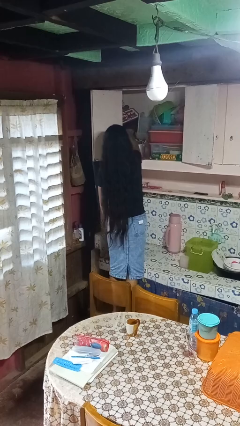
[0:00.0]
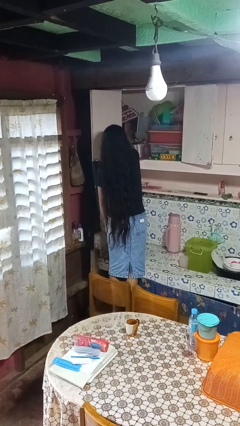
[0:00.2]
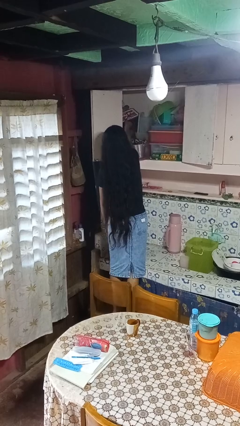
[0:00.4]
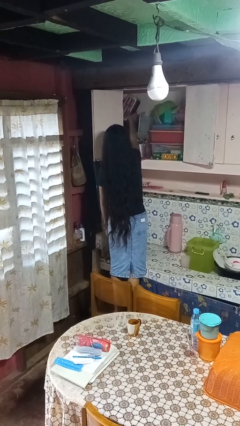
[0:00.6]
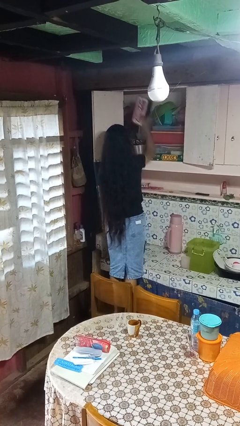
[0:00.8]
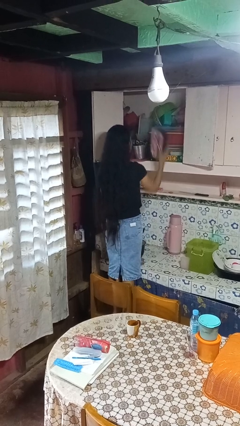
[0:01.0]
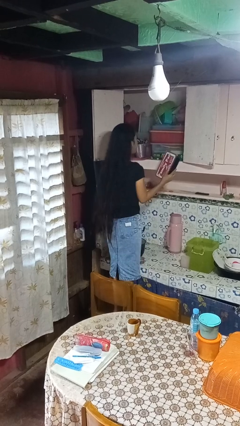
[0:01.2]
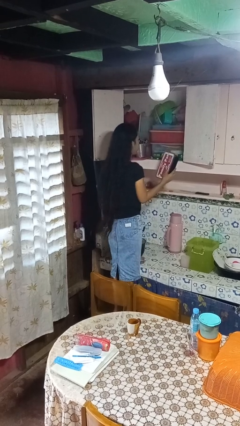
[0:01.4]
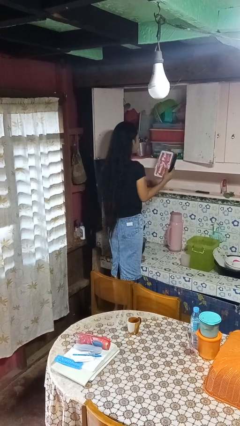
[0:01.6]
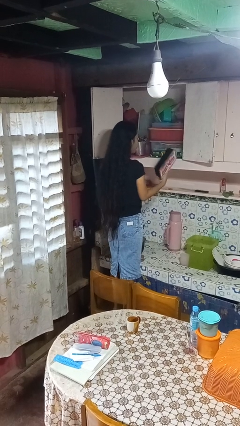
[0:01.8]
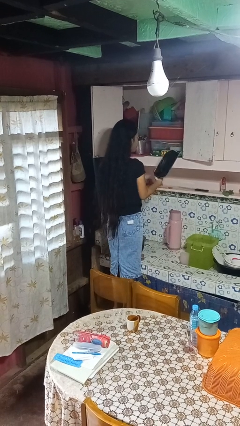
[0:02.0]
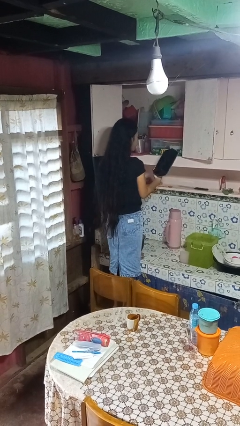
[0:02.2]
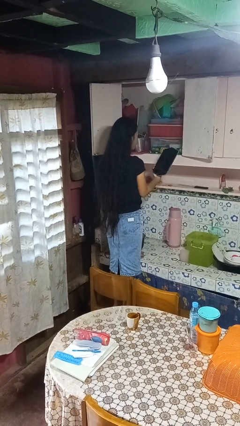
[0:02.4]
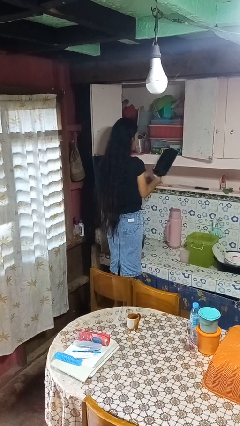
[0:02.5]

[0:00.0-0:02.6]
person takes object from cabinet

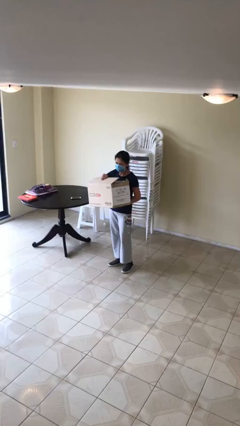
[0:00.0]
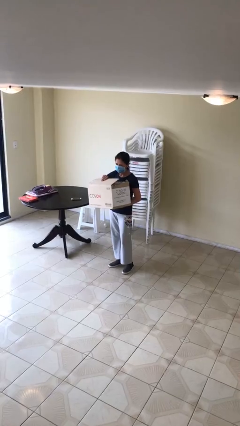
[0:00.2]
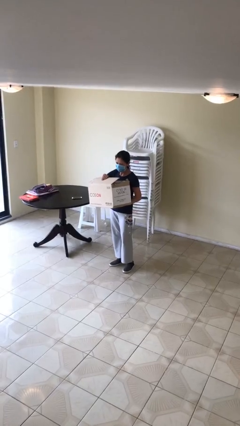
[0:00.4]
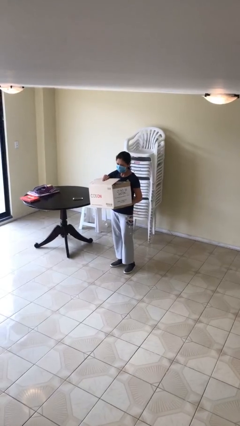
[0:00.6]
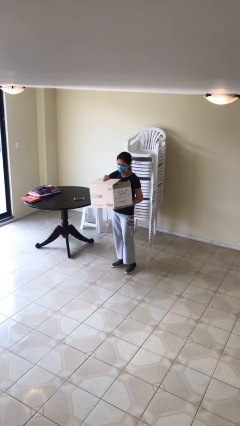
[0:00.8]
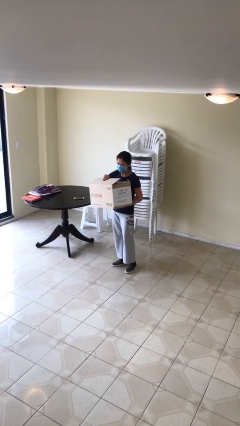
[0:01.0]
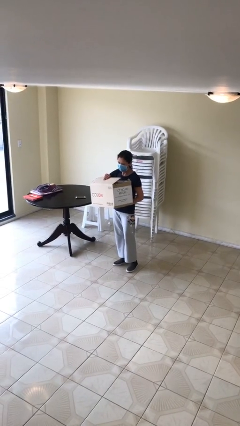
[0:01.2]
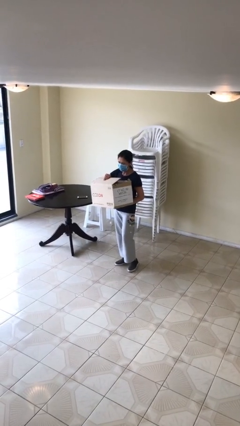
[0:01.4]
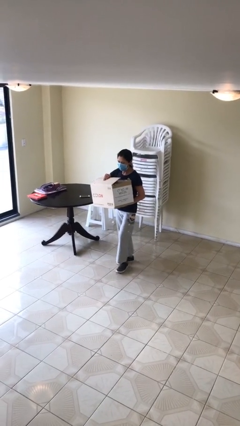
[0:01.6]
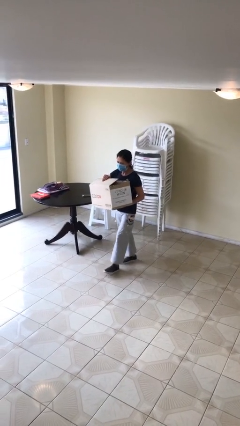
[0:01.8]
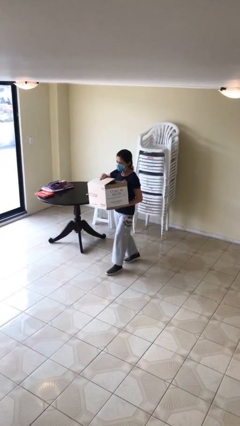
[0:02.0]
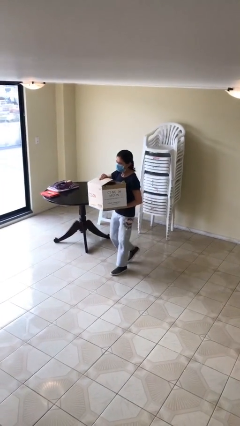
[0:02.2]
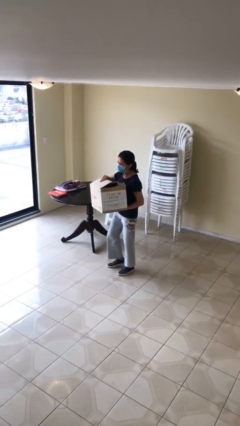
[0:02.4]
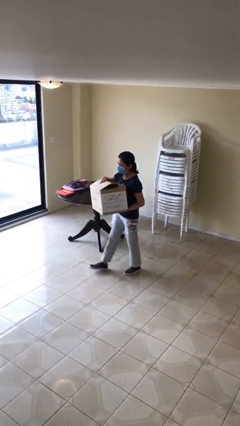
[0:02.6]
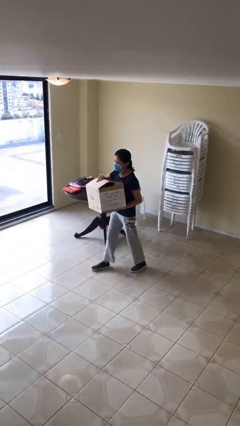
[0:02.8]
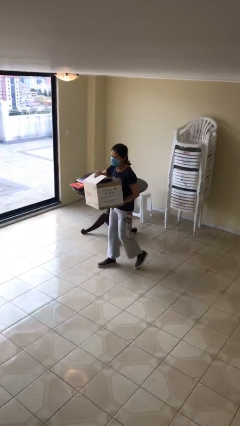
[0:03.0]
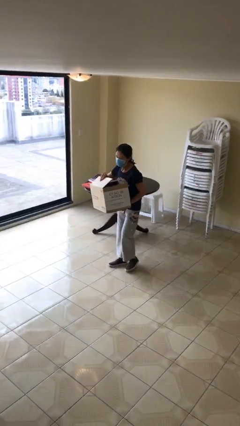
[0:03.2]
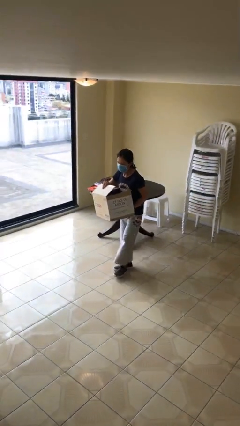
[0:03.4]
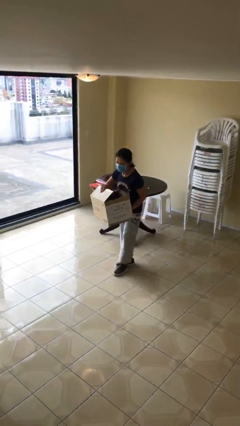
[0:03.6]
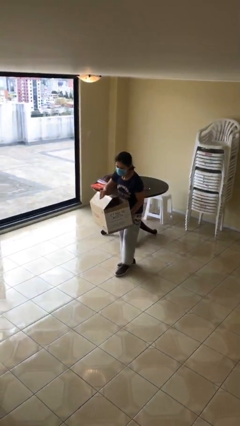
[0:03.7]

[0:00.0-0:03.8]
person carries heavy object

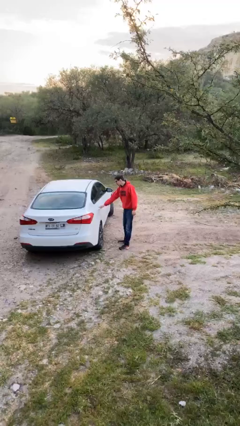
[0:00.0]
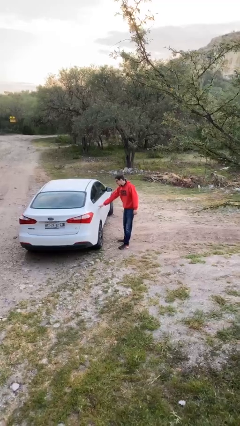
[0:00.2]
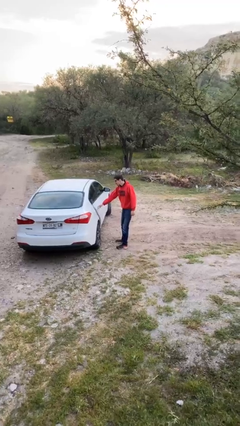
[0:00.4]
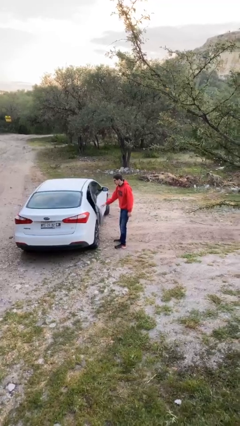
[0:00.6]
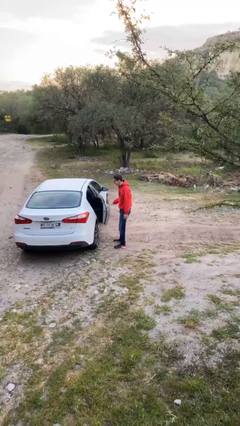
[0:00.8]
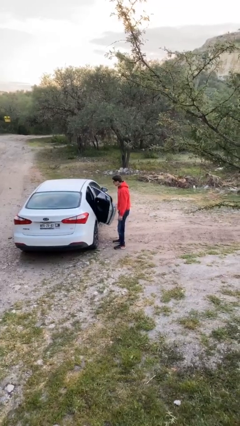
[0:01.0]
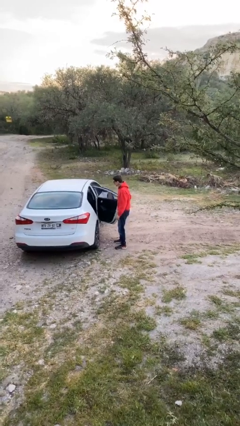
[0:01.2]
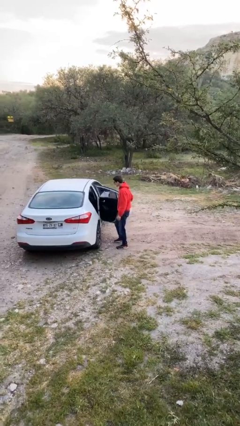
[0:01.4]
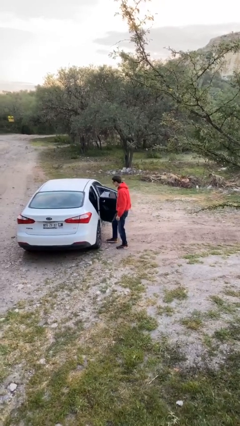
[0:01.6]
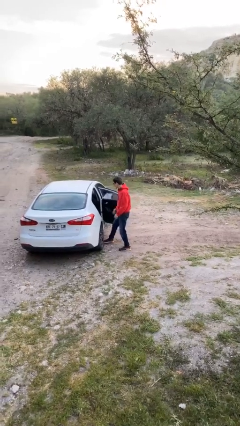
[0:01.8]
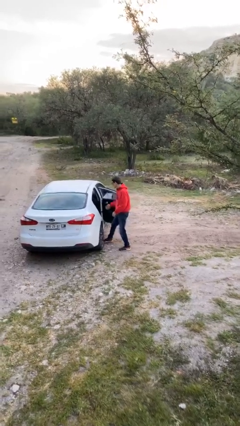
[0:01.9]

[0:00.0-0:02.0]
person opens car door

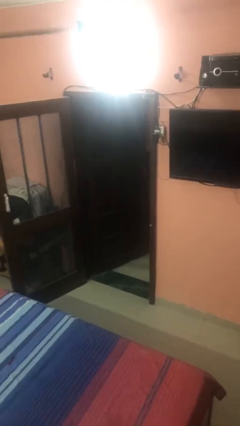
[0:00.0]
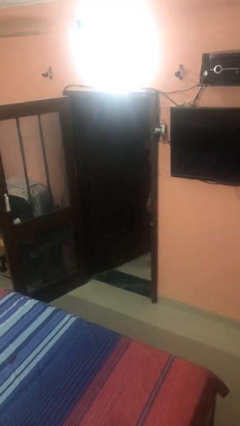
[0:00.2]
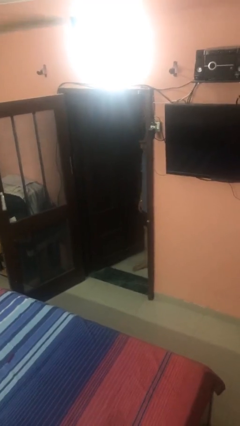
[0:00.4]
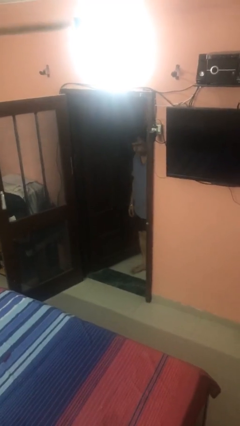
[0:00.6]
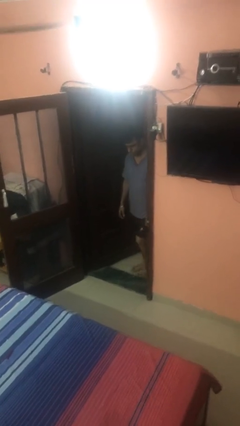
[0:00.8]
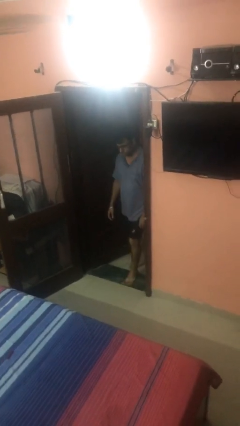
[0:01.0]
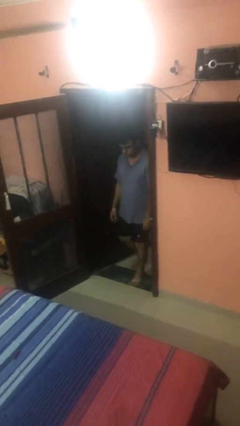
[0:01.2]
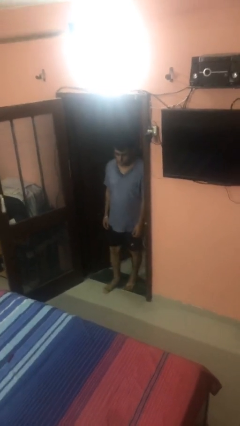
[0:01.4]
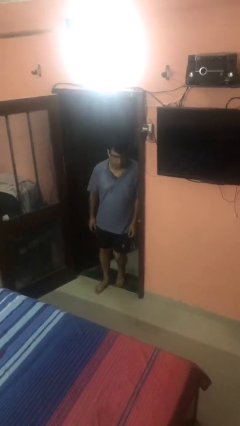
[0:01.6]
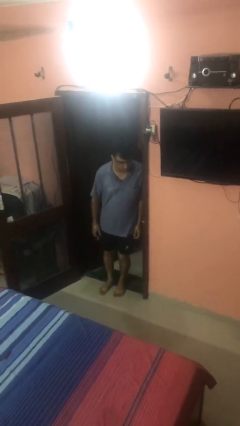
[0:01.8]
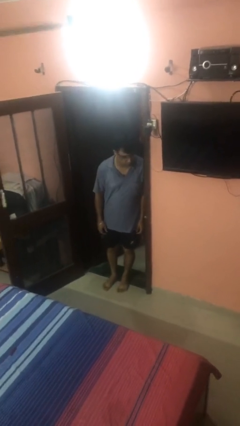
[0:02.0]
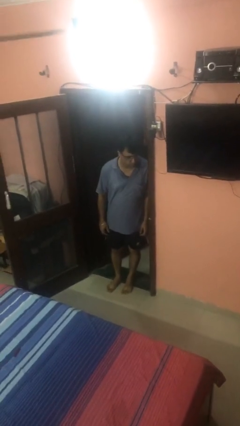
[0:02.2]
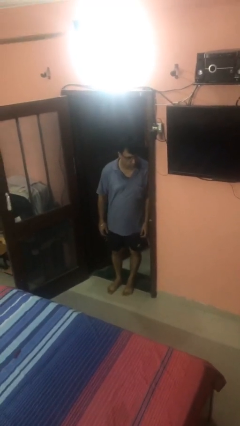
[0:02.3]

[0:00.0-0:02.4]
person bumps into wall

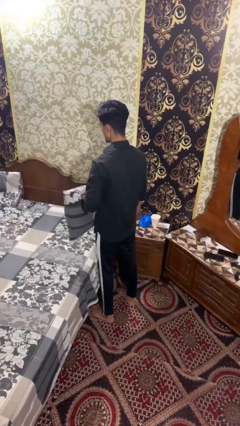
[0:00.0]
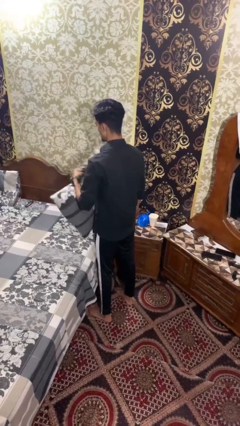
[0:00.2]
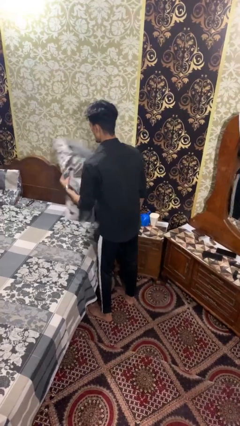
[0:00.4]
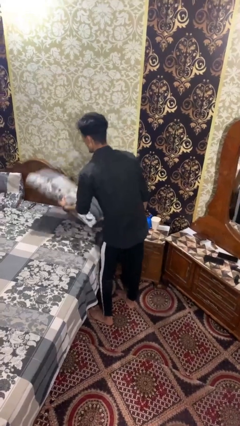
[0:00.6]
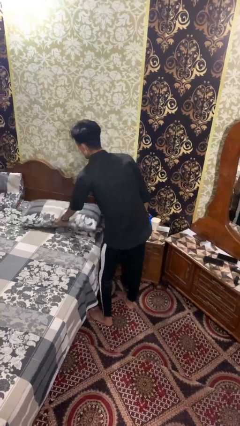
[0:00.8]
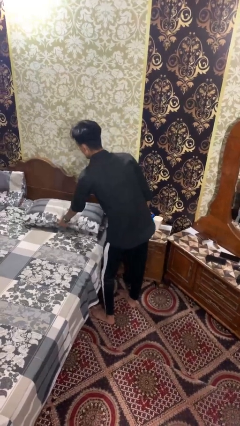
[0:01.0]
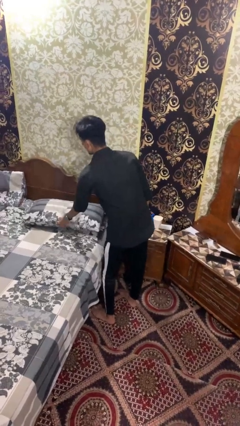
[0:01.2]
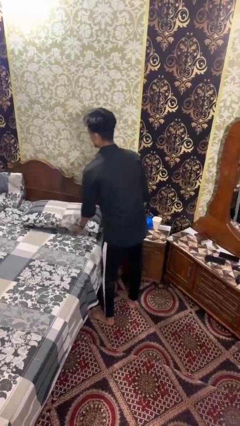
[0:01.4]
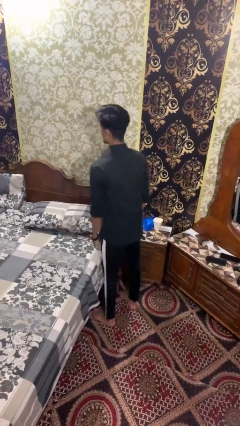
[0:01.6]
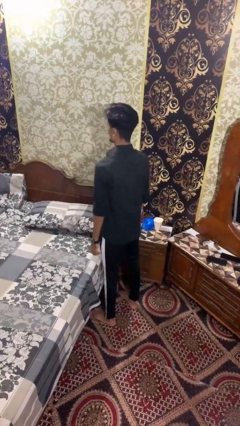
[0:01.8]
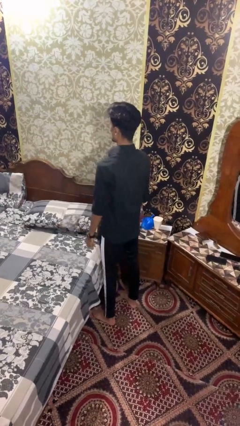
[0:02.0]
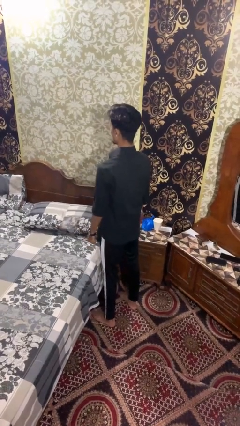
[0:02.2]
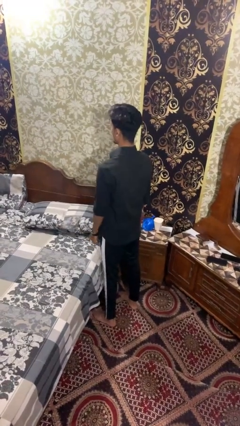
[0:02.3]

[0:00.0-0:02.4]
person puts down object on bed

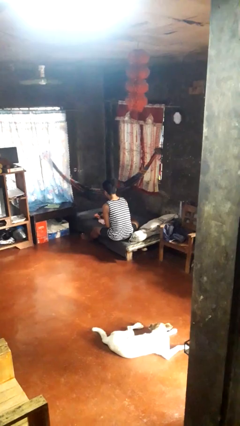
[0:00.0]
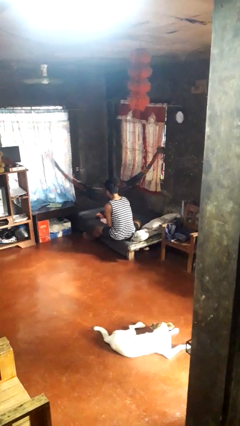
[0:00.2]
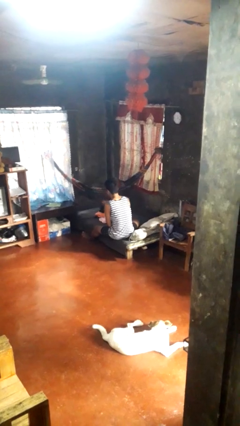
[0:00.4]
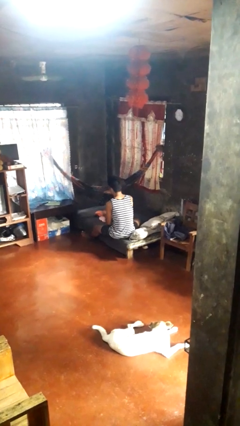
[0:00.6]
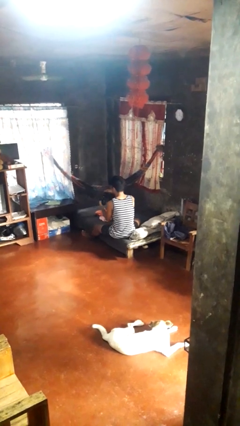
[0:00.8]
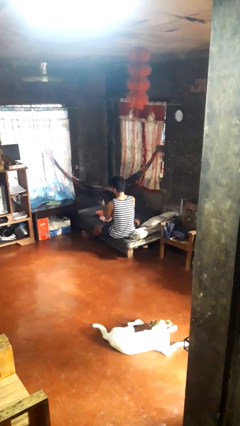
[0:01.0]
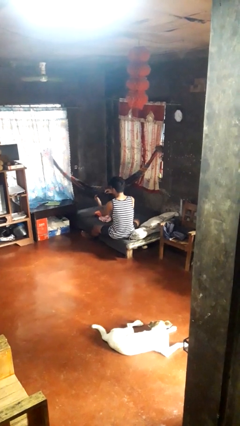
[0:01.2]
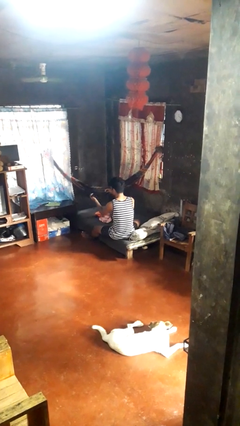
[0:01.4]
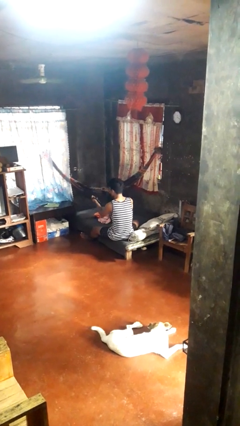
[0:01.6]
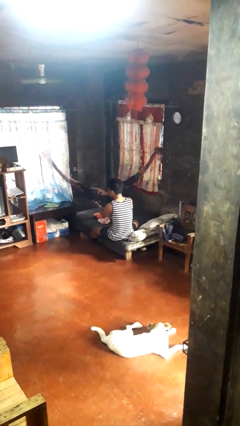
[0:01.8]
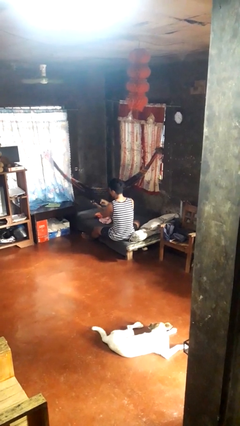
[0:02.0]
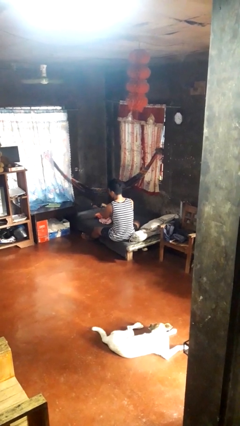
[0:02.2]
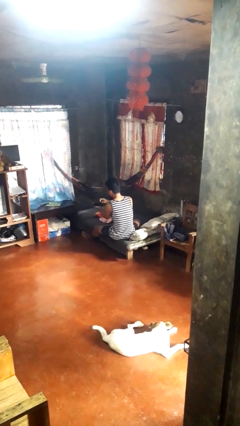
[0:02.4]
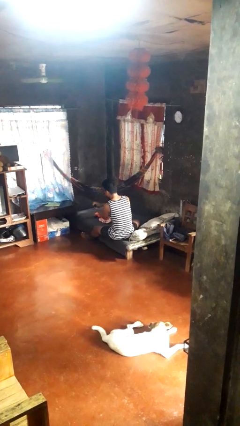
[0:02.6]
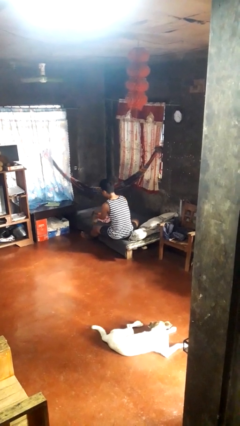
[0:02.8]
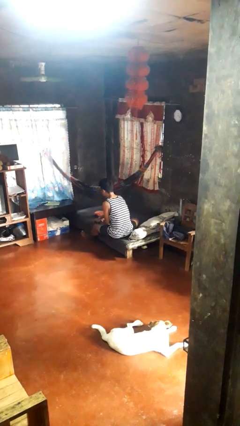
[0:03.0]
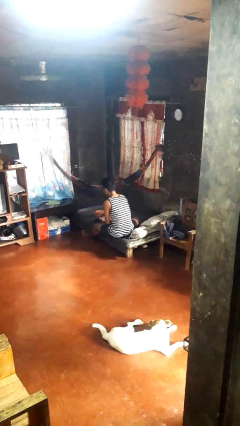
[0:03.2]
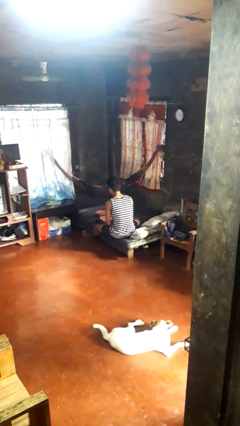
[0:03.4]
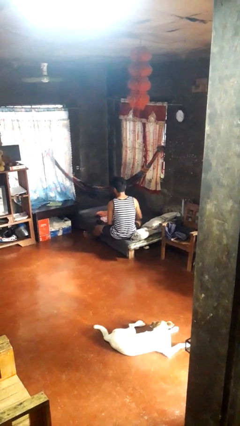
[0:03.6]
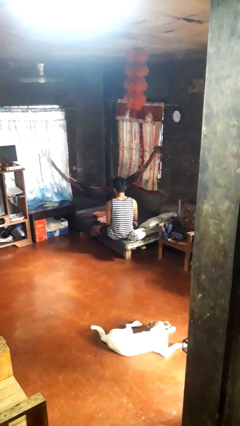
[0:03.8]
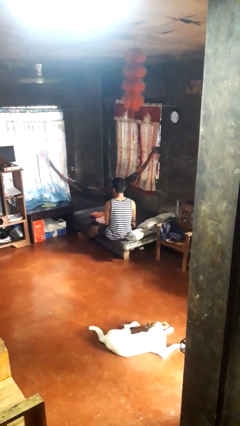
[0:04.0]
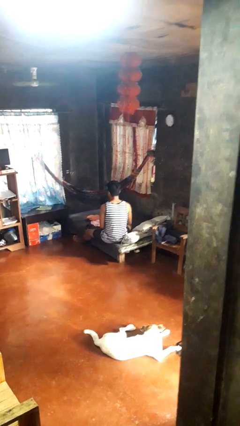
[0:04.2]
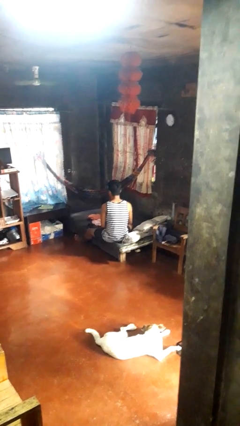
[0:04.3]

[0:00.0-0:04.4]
person folds socks
